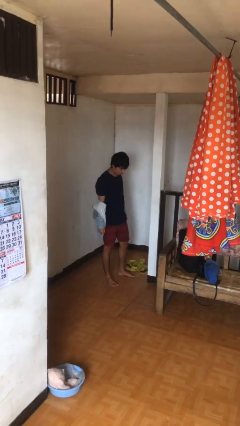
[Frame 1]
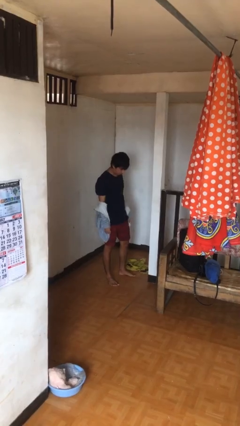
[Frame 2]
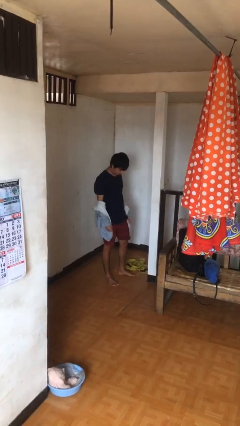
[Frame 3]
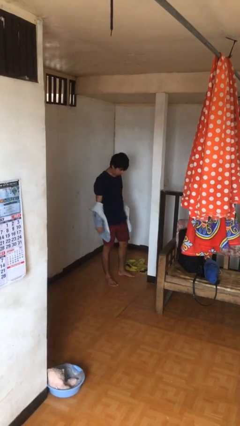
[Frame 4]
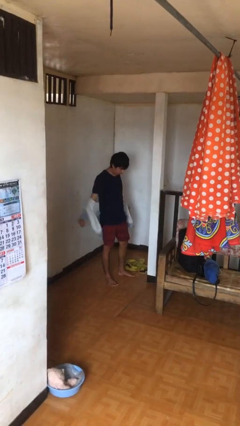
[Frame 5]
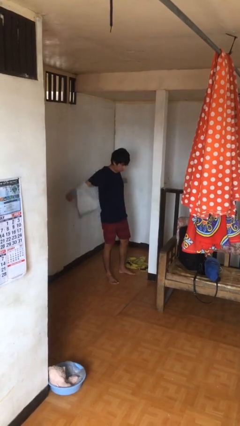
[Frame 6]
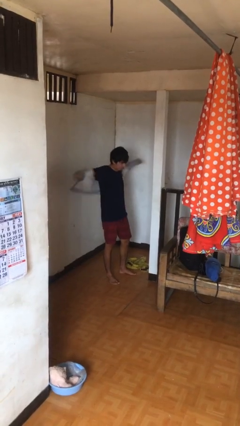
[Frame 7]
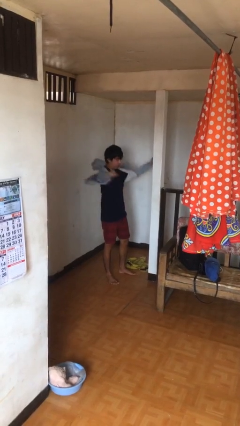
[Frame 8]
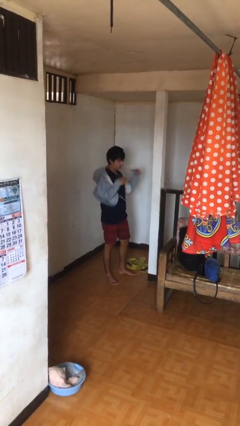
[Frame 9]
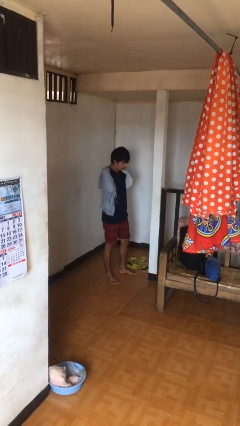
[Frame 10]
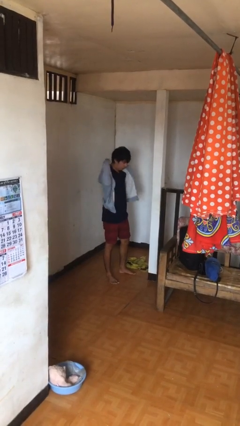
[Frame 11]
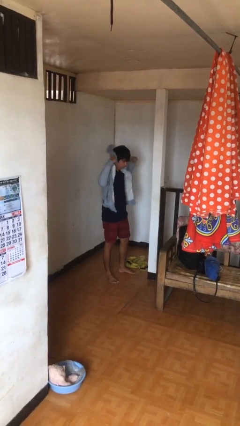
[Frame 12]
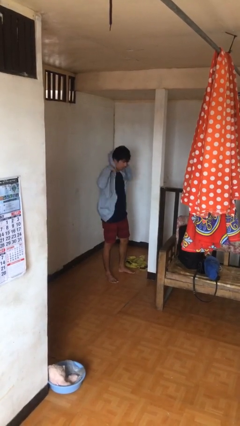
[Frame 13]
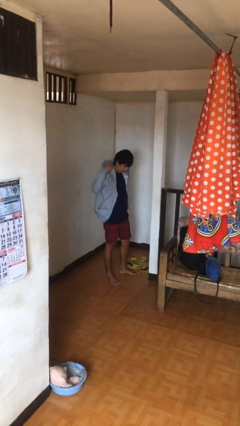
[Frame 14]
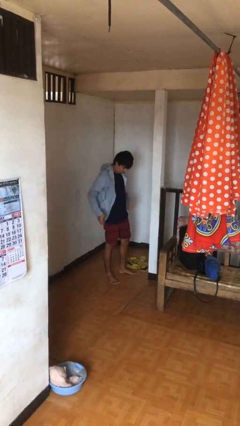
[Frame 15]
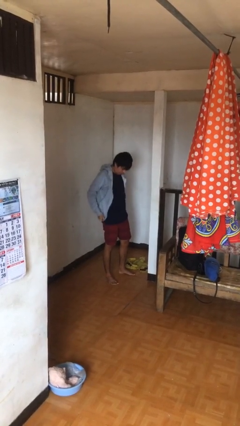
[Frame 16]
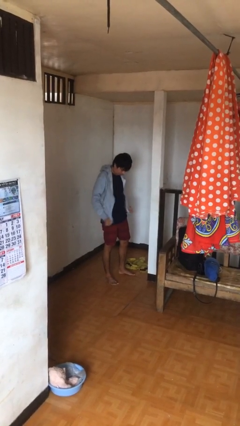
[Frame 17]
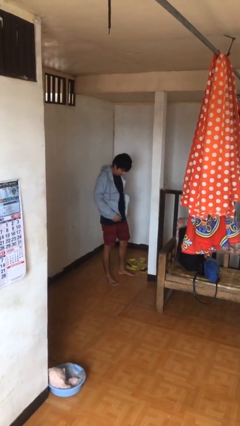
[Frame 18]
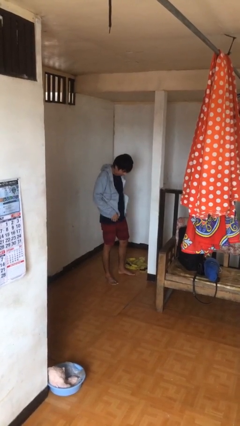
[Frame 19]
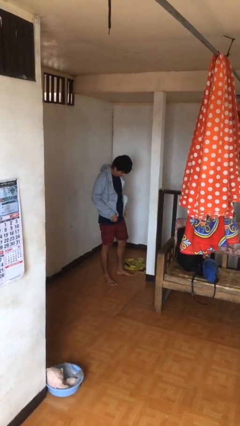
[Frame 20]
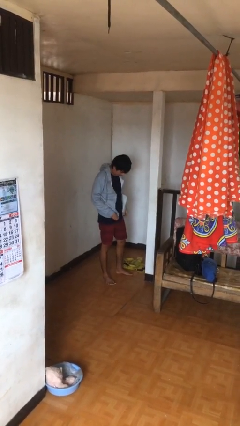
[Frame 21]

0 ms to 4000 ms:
person puts on jacket

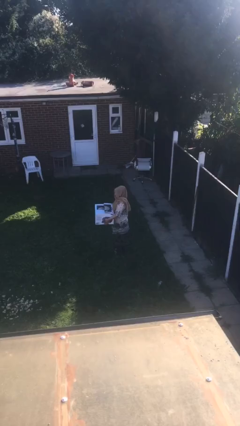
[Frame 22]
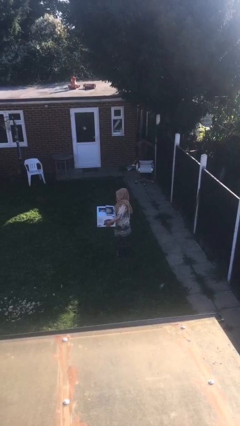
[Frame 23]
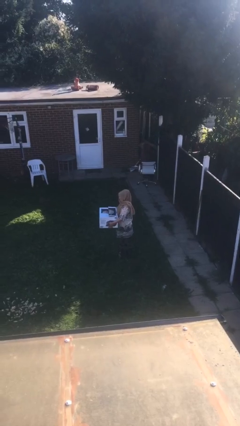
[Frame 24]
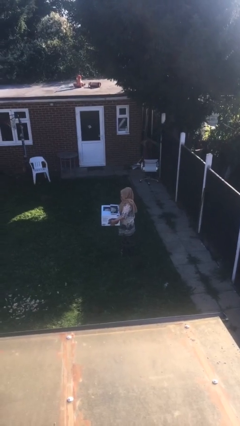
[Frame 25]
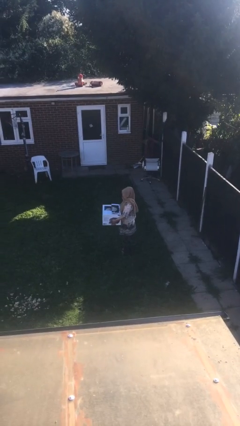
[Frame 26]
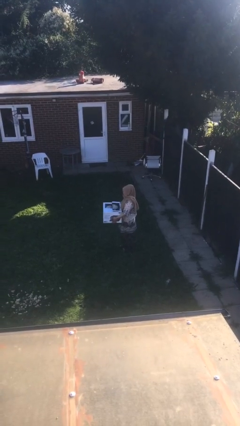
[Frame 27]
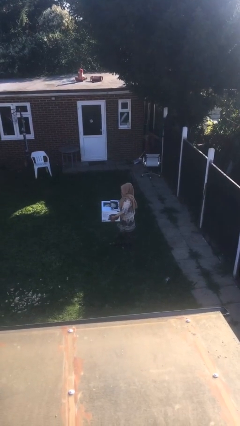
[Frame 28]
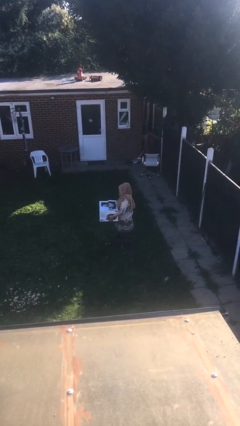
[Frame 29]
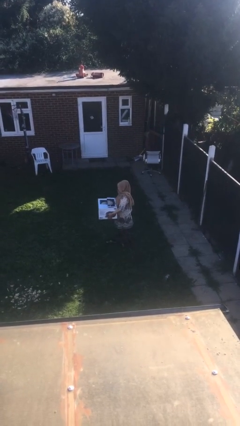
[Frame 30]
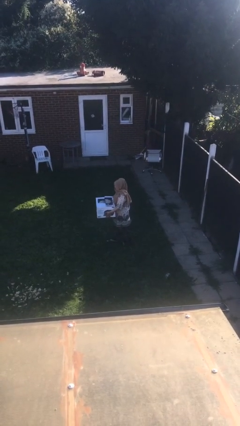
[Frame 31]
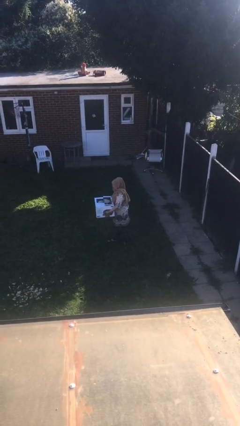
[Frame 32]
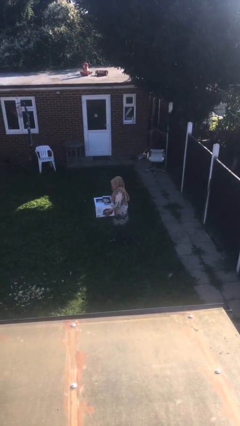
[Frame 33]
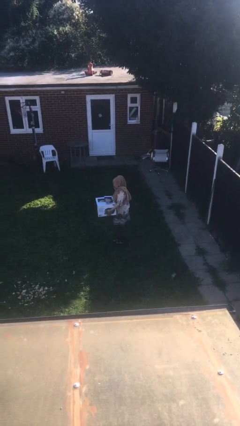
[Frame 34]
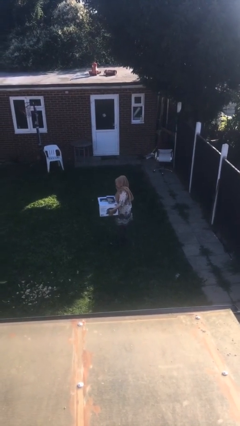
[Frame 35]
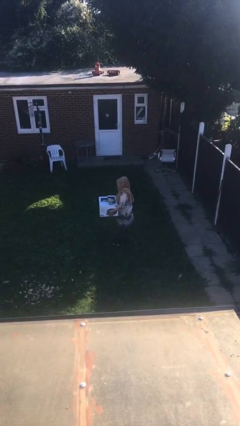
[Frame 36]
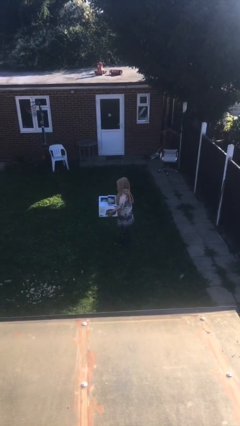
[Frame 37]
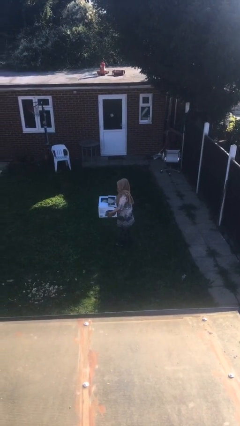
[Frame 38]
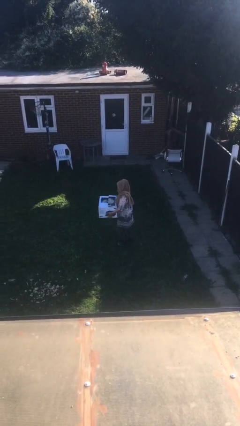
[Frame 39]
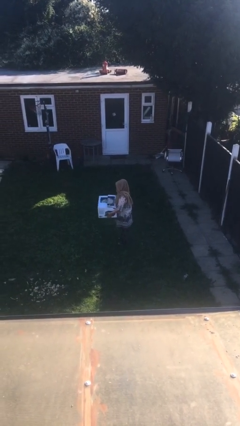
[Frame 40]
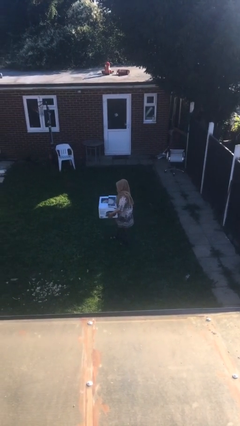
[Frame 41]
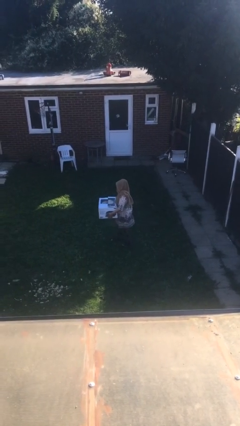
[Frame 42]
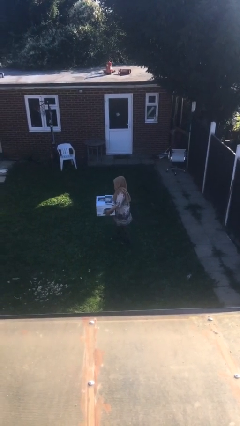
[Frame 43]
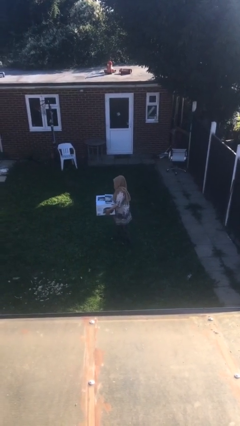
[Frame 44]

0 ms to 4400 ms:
person carries heavy object

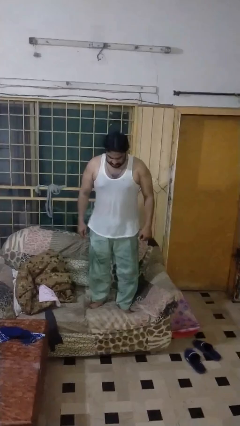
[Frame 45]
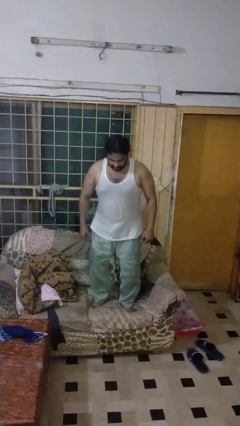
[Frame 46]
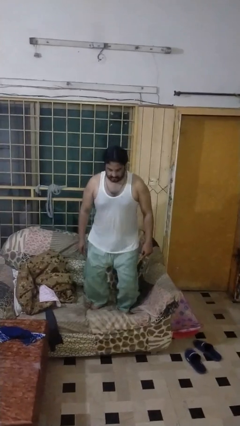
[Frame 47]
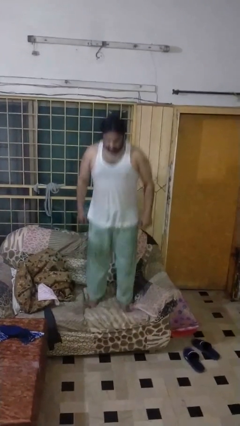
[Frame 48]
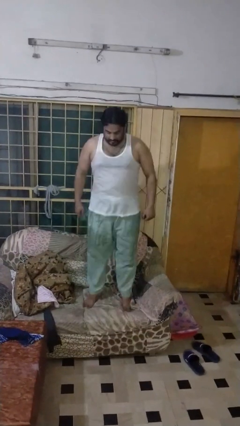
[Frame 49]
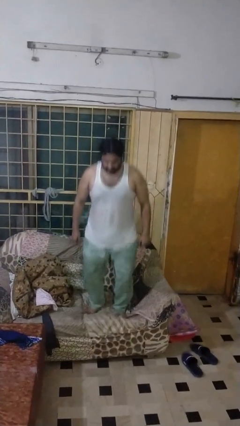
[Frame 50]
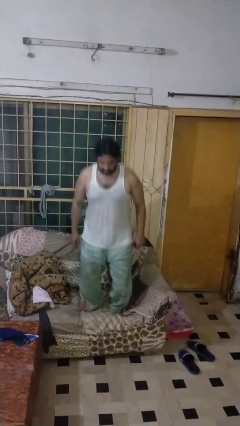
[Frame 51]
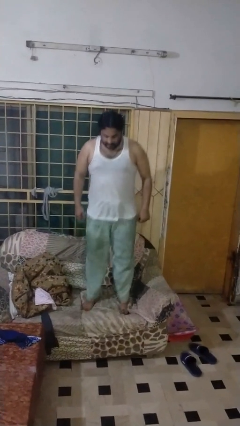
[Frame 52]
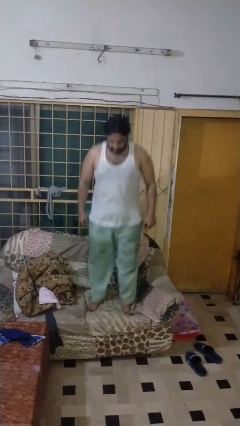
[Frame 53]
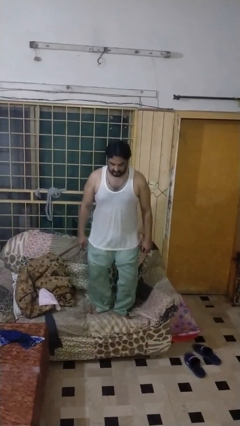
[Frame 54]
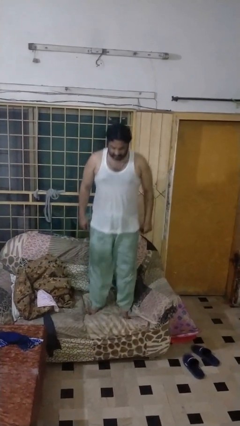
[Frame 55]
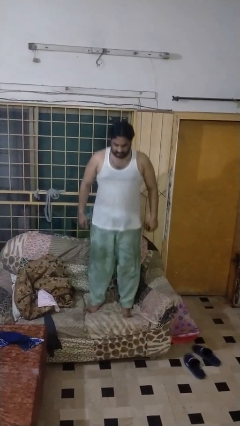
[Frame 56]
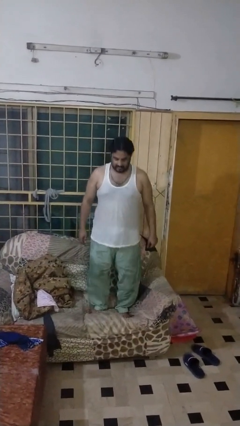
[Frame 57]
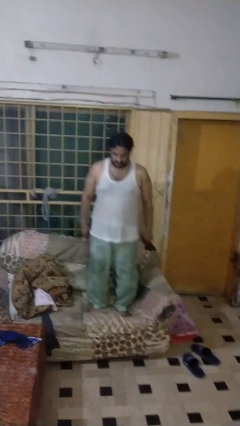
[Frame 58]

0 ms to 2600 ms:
person jumps on couch

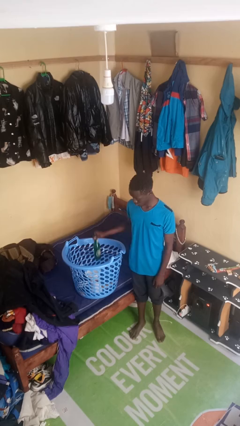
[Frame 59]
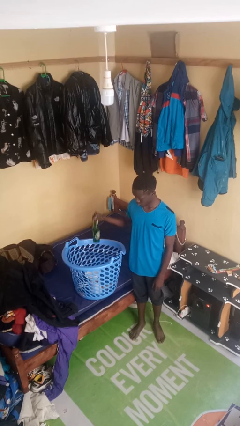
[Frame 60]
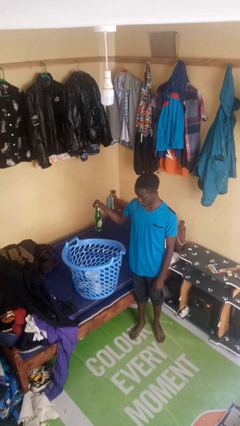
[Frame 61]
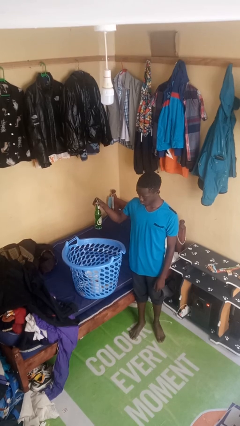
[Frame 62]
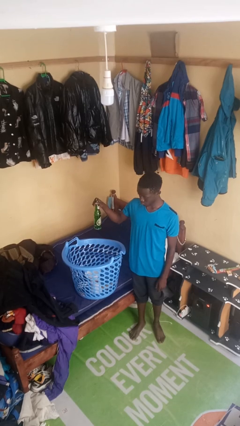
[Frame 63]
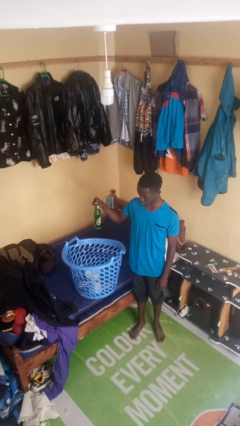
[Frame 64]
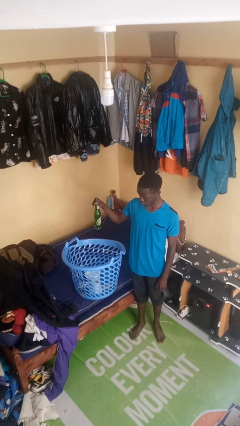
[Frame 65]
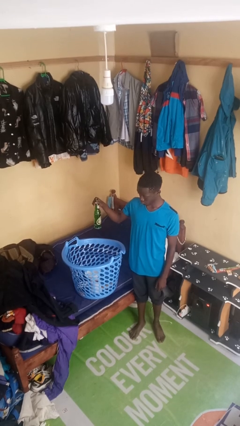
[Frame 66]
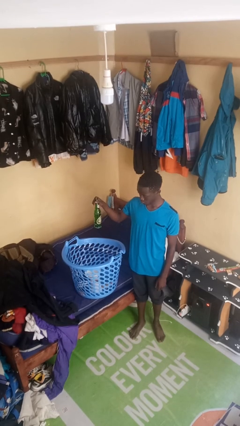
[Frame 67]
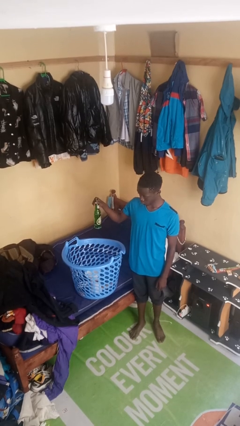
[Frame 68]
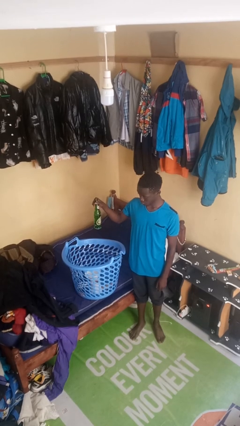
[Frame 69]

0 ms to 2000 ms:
person takes object from basket

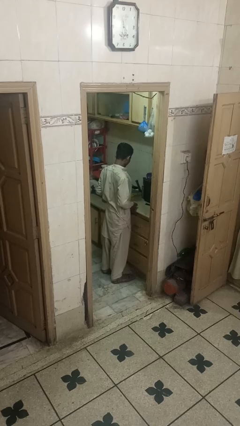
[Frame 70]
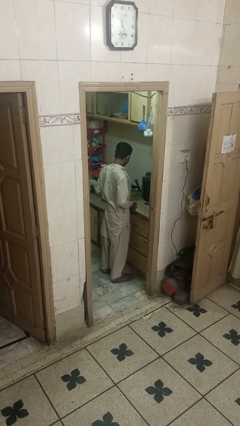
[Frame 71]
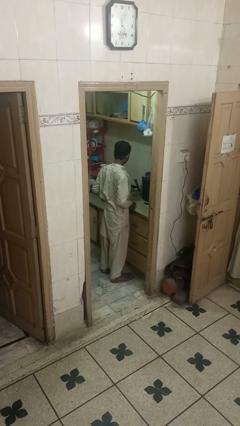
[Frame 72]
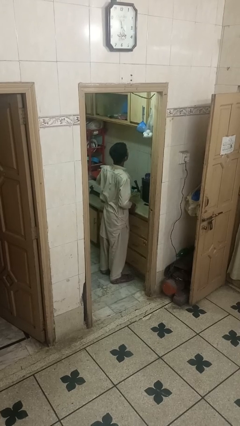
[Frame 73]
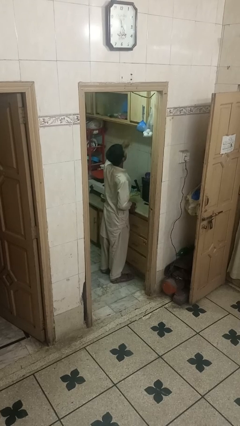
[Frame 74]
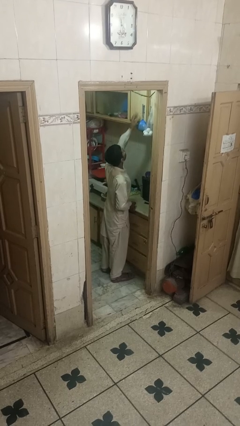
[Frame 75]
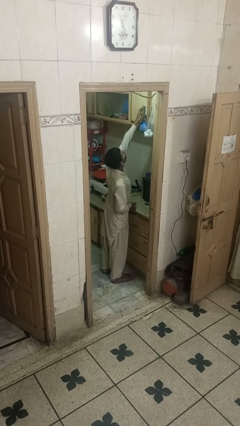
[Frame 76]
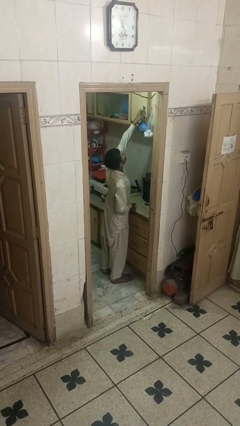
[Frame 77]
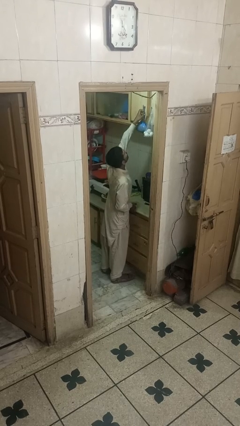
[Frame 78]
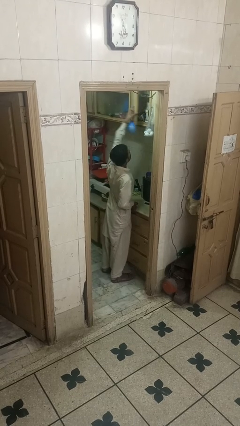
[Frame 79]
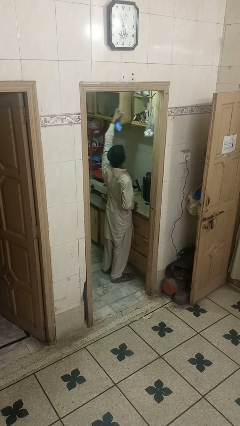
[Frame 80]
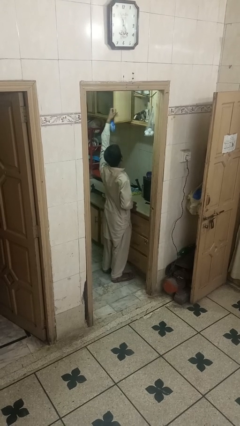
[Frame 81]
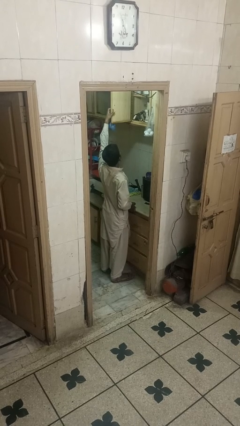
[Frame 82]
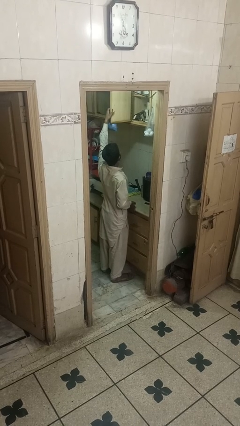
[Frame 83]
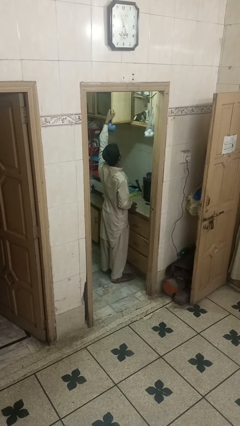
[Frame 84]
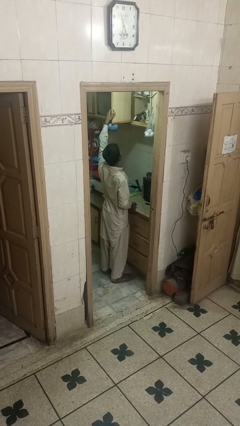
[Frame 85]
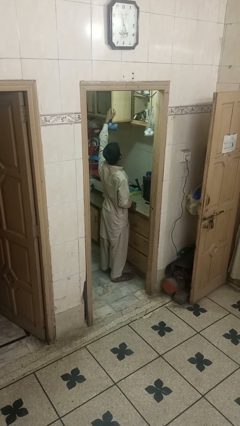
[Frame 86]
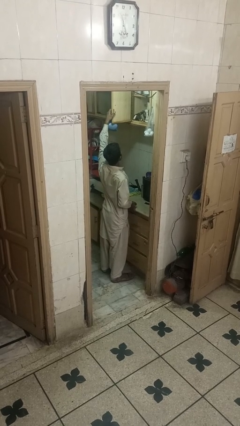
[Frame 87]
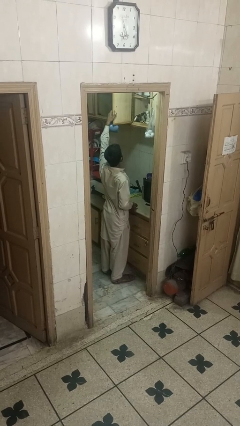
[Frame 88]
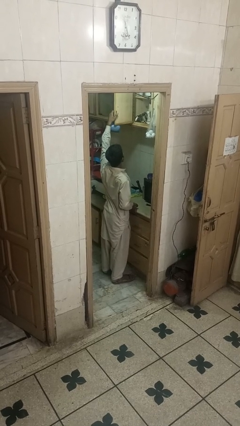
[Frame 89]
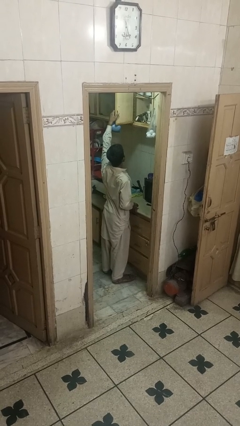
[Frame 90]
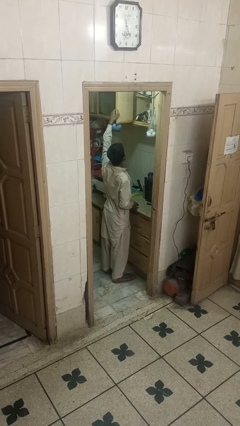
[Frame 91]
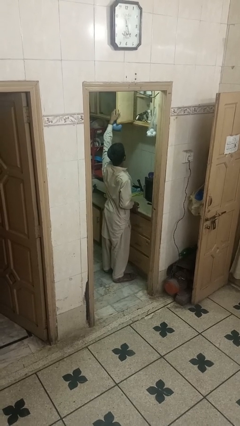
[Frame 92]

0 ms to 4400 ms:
person opens cabinet

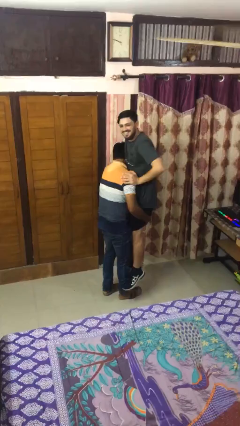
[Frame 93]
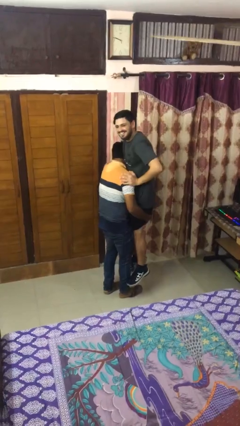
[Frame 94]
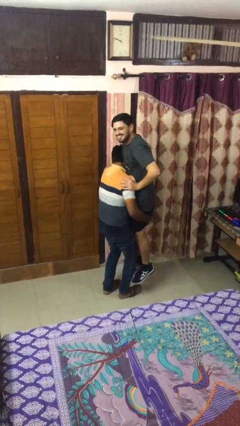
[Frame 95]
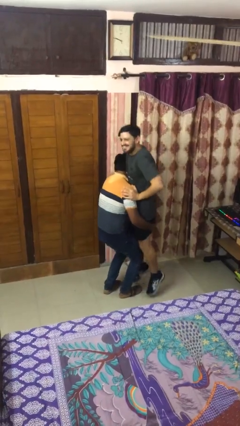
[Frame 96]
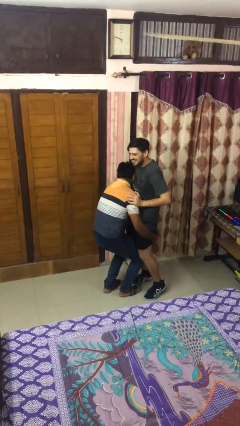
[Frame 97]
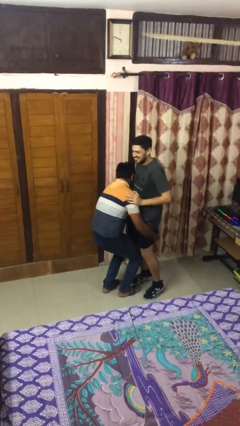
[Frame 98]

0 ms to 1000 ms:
person puts down person
